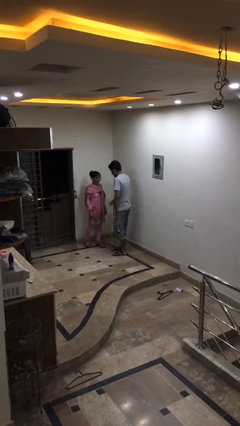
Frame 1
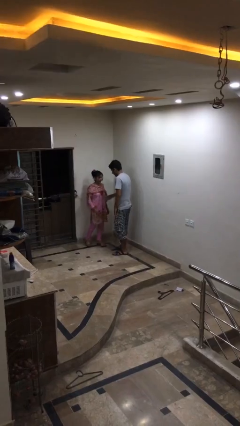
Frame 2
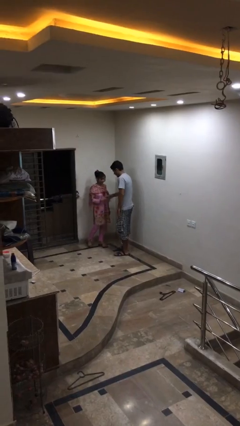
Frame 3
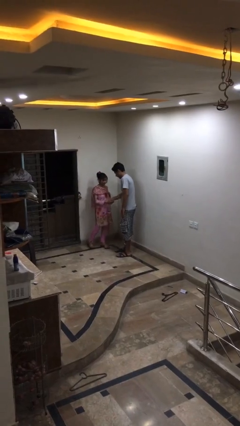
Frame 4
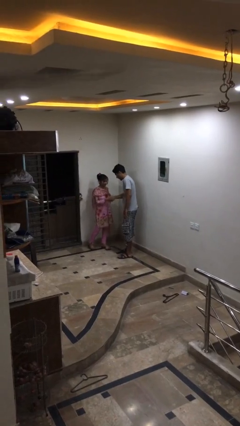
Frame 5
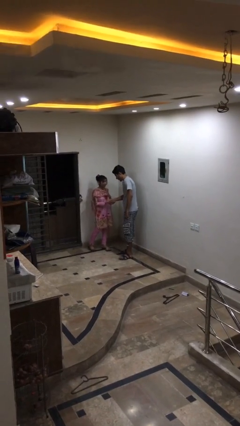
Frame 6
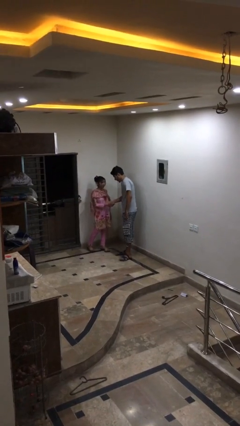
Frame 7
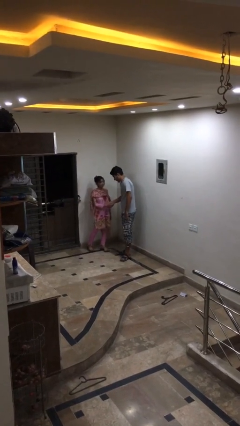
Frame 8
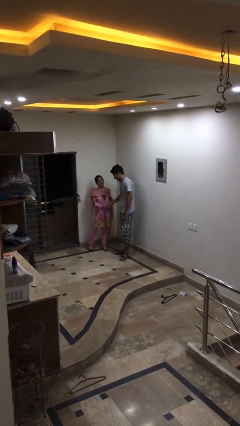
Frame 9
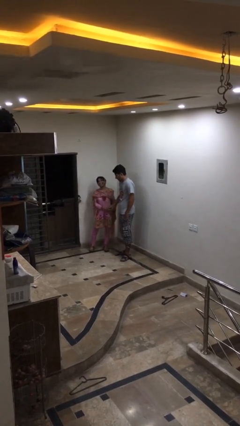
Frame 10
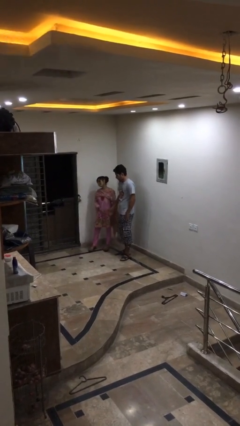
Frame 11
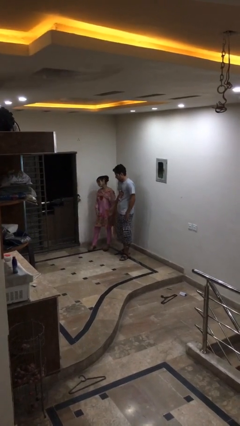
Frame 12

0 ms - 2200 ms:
person shakes hand

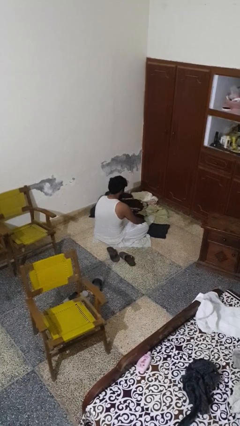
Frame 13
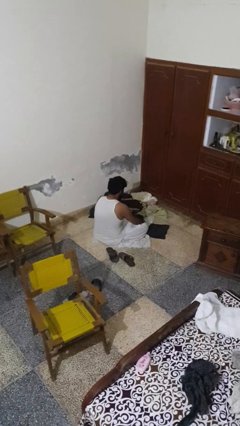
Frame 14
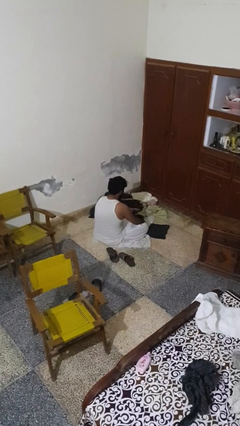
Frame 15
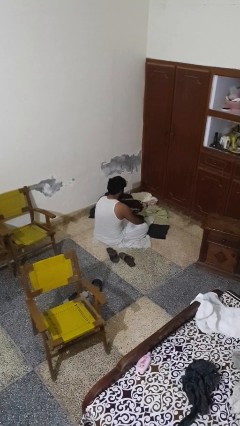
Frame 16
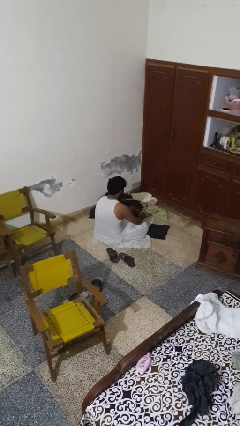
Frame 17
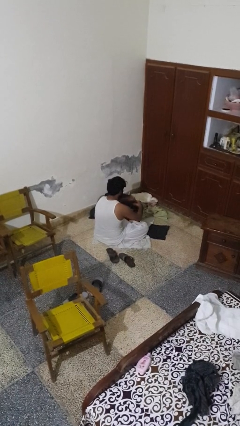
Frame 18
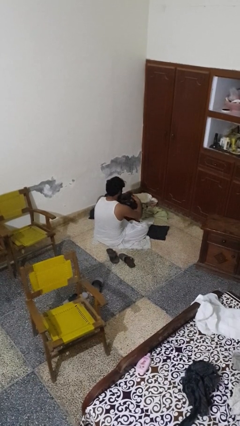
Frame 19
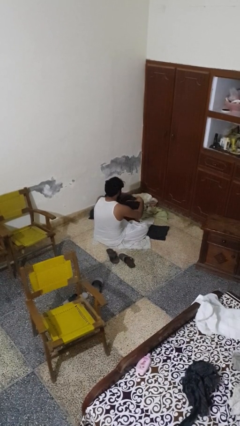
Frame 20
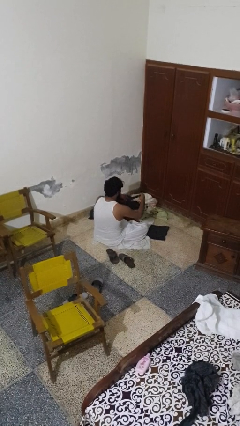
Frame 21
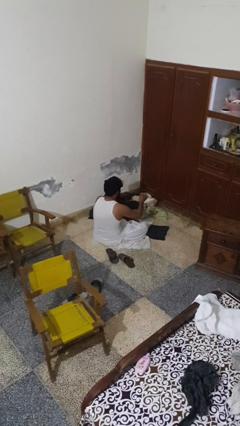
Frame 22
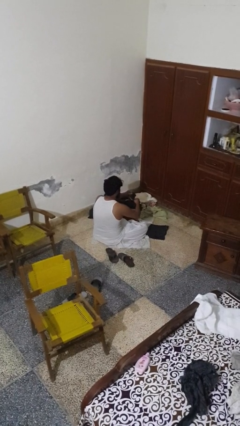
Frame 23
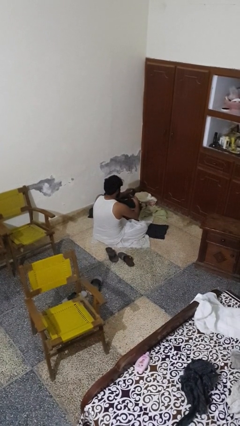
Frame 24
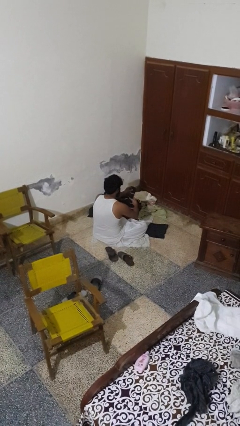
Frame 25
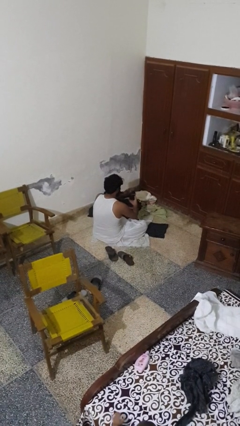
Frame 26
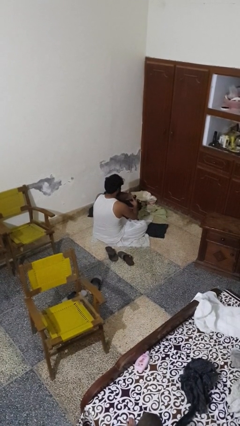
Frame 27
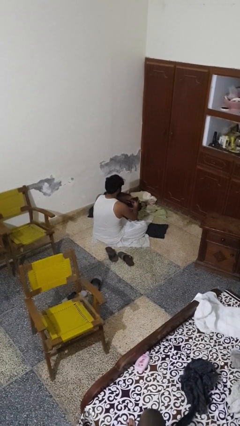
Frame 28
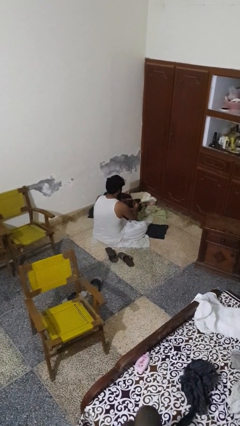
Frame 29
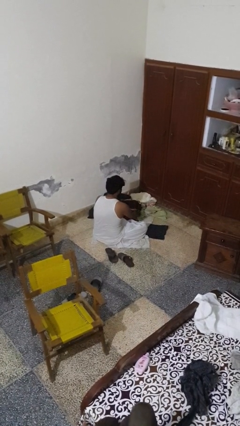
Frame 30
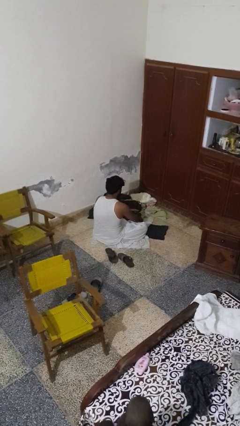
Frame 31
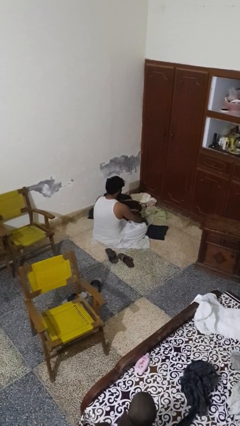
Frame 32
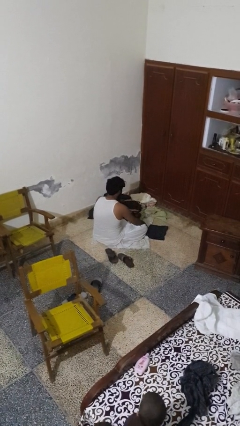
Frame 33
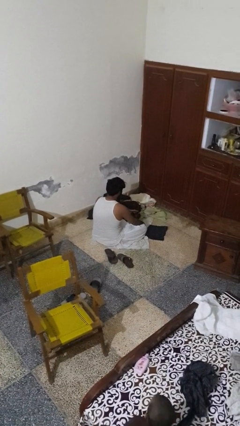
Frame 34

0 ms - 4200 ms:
person folds socks

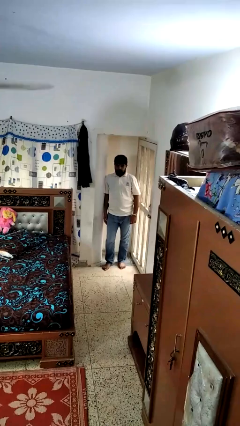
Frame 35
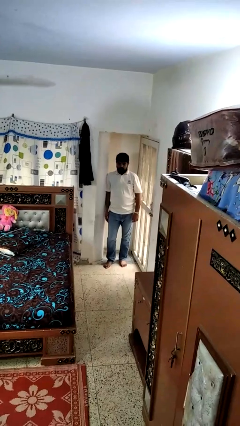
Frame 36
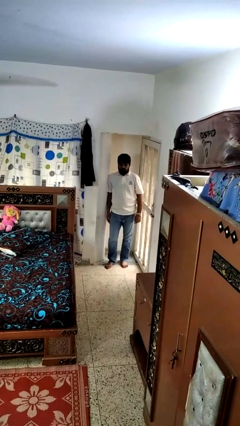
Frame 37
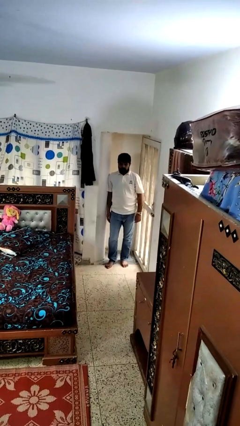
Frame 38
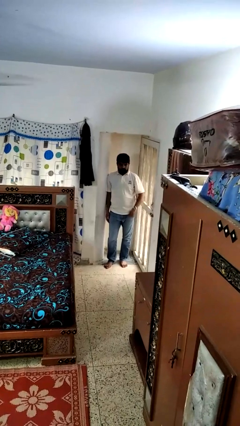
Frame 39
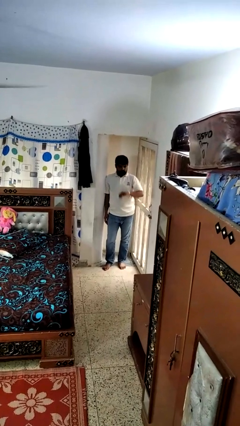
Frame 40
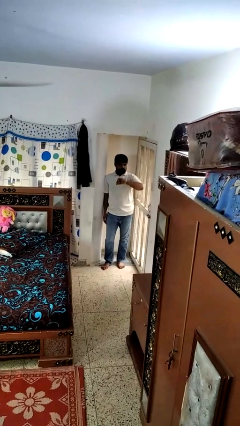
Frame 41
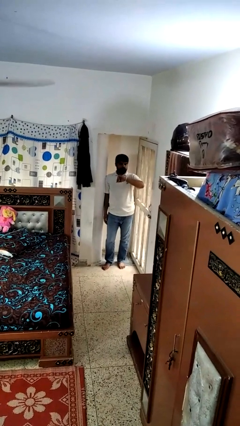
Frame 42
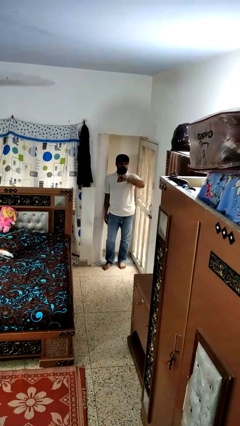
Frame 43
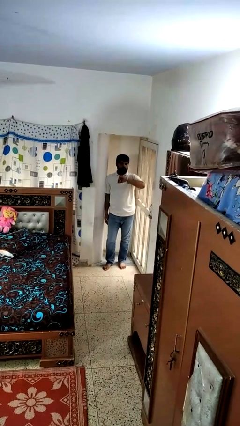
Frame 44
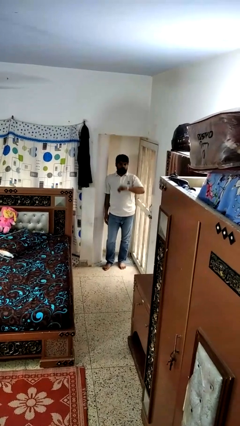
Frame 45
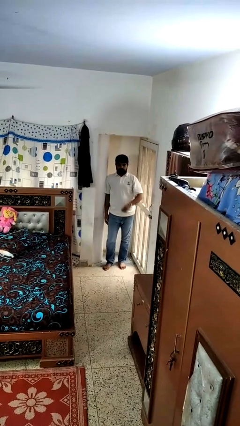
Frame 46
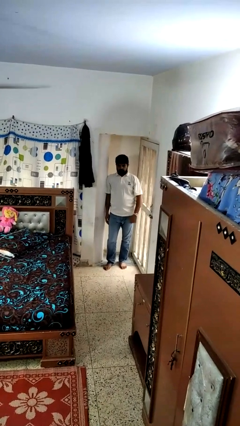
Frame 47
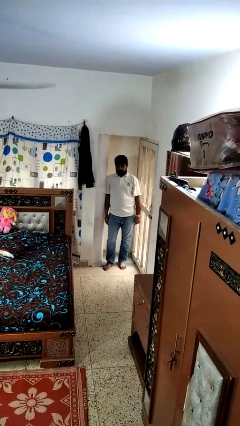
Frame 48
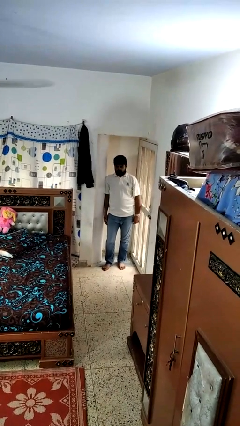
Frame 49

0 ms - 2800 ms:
person looks at wristwatch

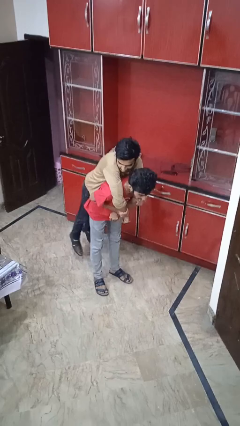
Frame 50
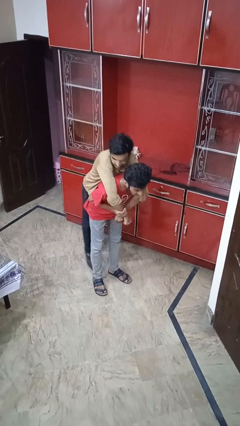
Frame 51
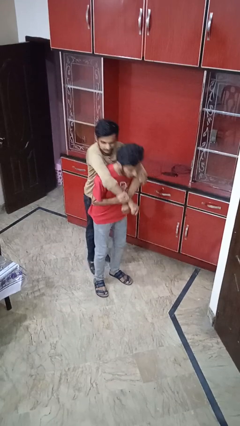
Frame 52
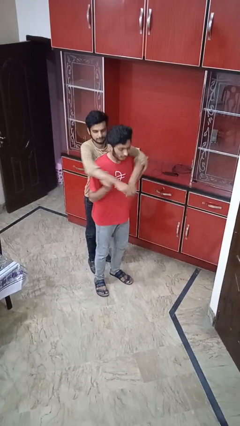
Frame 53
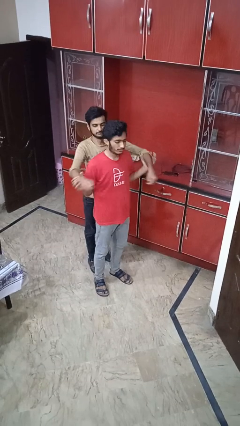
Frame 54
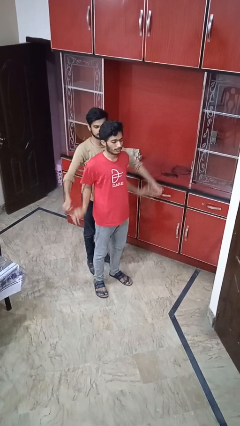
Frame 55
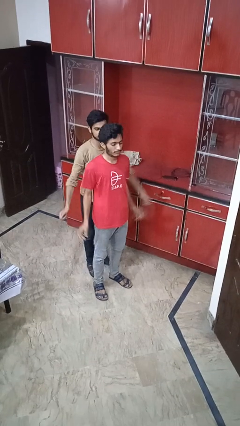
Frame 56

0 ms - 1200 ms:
person puts down person

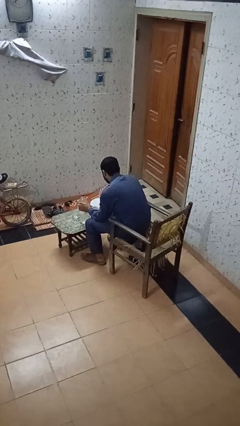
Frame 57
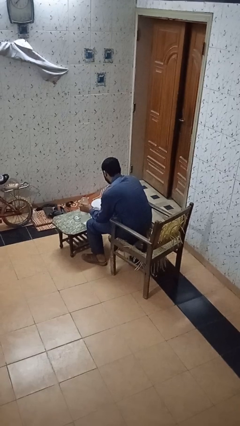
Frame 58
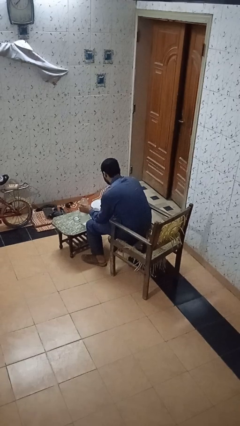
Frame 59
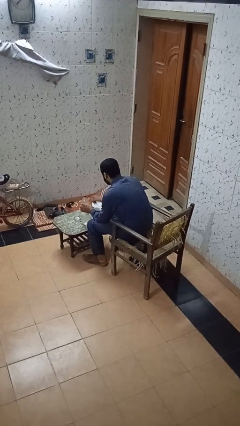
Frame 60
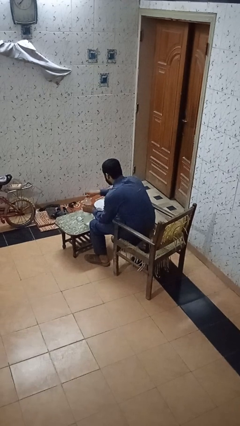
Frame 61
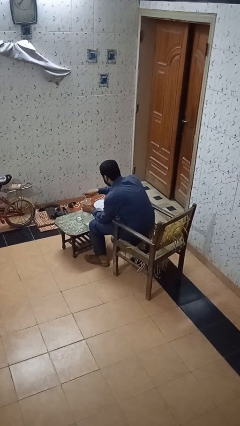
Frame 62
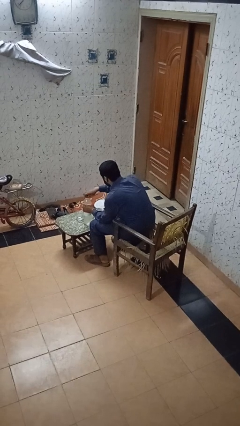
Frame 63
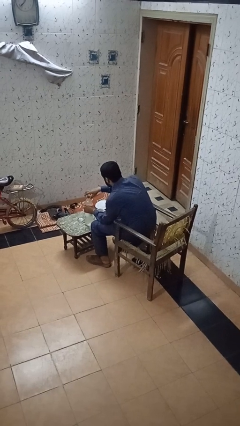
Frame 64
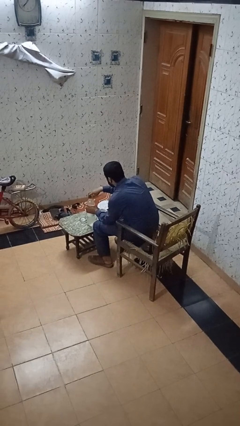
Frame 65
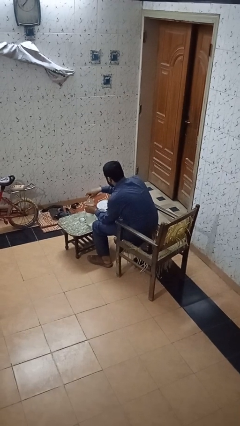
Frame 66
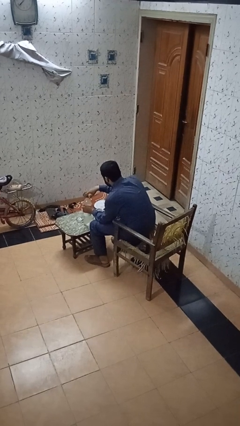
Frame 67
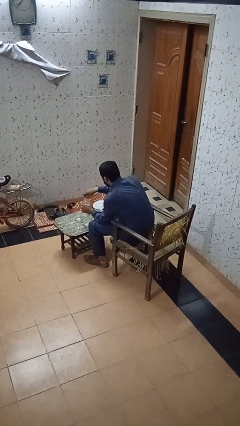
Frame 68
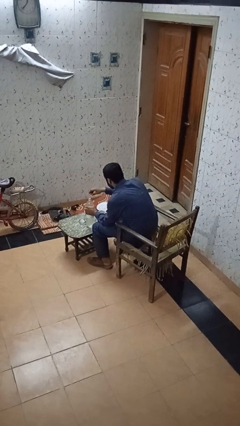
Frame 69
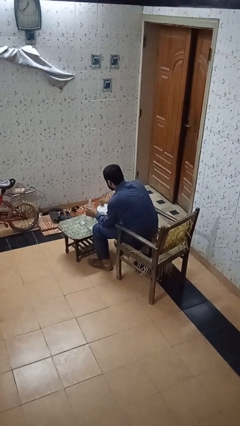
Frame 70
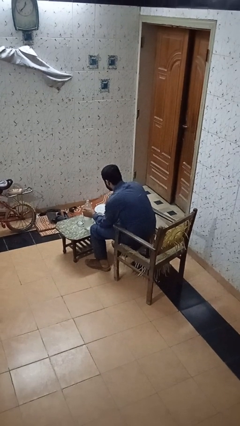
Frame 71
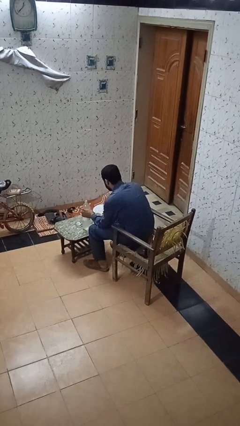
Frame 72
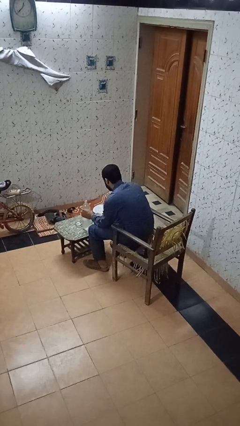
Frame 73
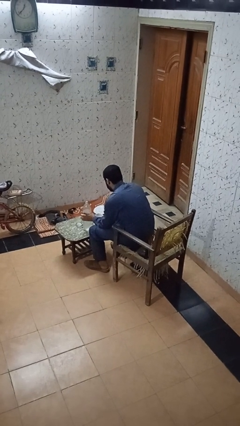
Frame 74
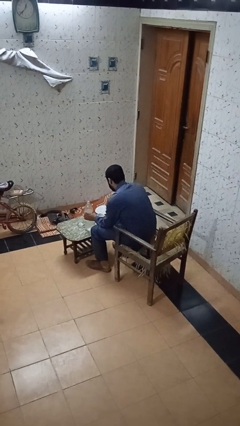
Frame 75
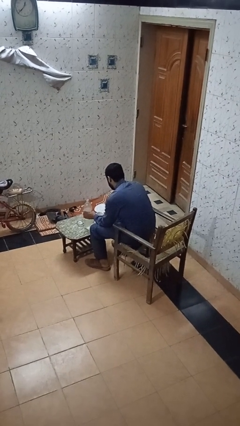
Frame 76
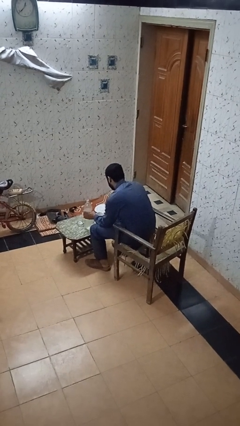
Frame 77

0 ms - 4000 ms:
person unscrews lid from bottle

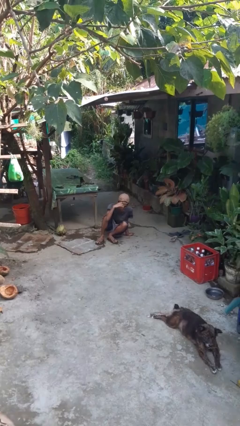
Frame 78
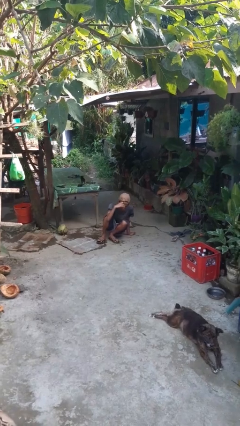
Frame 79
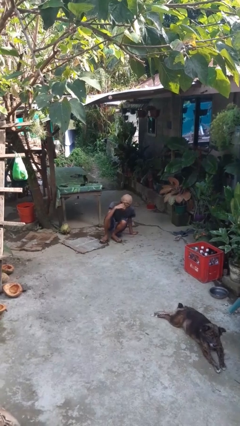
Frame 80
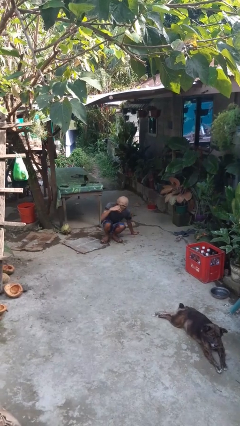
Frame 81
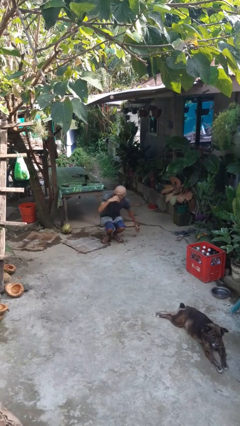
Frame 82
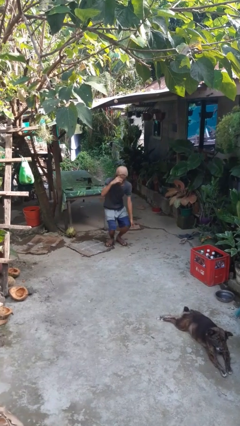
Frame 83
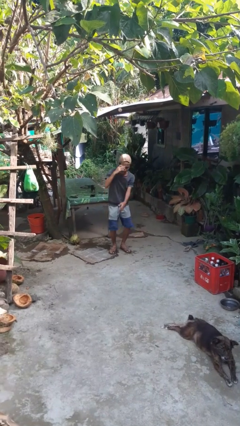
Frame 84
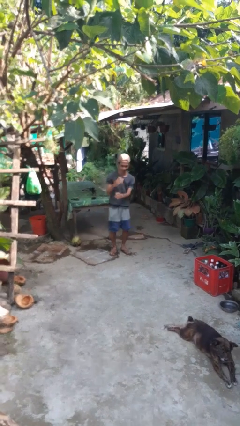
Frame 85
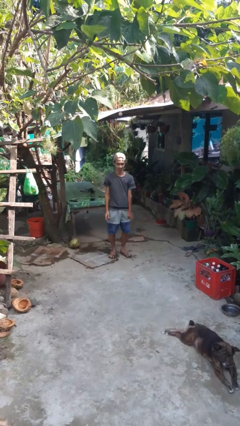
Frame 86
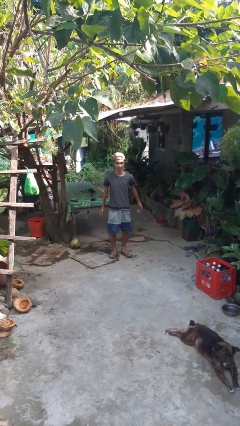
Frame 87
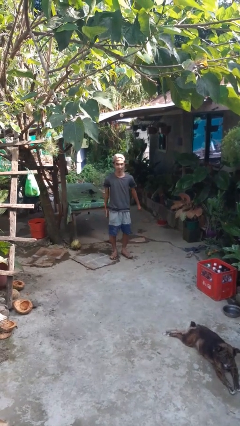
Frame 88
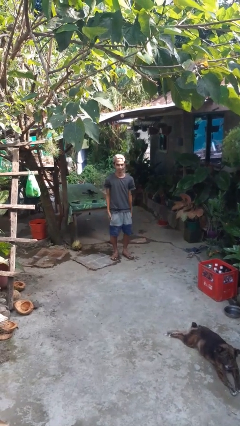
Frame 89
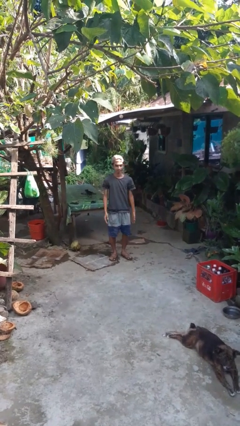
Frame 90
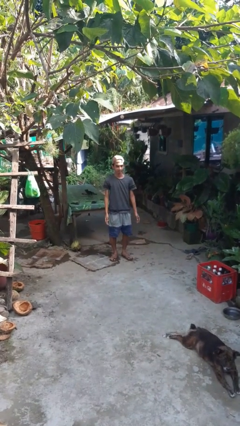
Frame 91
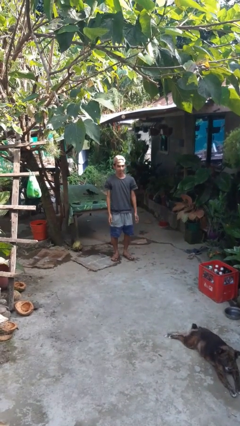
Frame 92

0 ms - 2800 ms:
person stands up from floor
